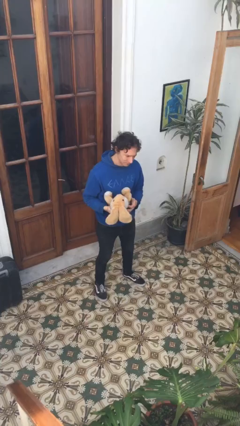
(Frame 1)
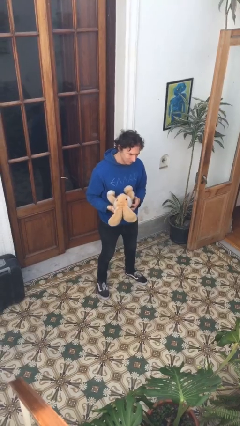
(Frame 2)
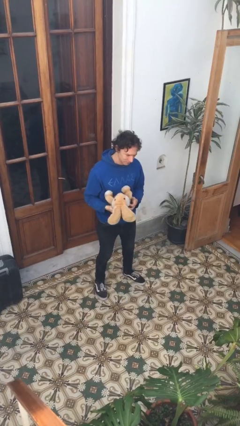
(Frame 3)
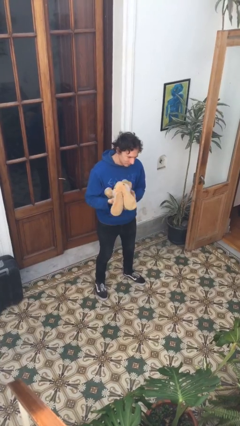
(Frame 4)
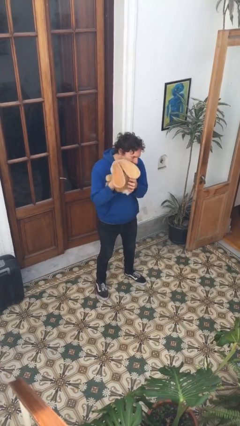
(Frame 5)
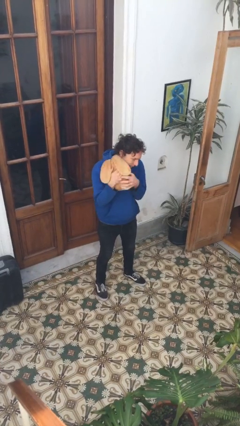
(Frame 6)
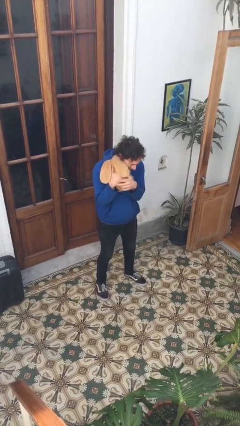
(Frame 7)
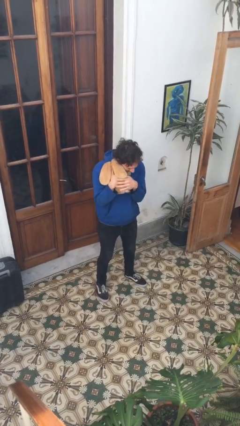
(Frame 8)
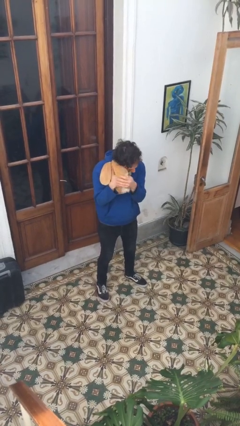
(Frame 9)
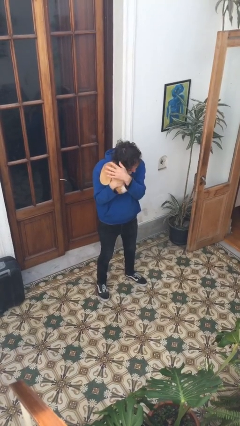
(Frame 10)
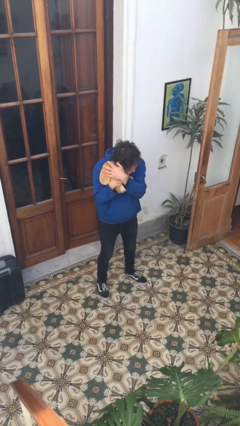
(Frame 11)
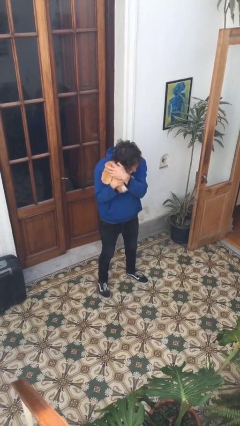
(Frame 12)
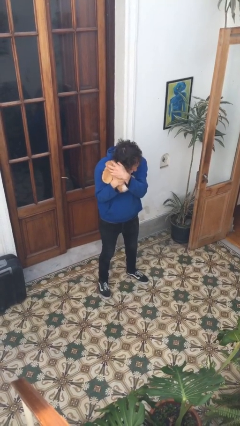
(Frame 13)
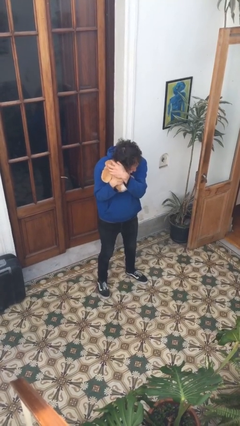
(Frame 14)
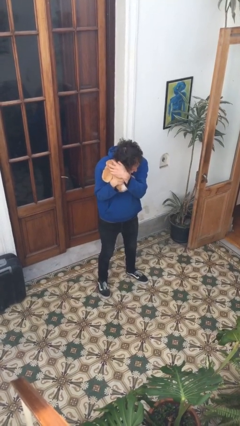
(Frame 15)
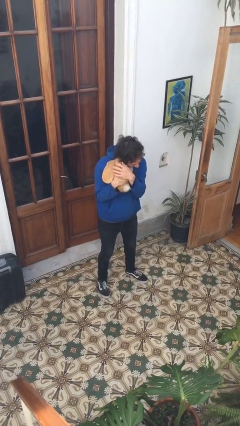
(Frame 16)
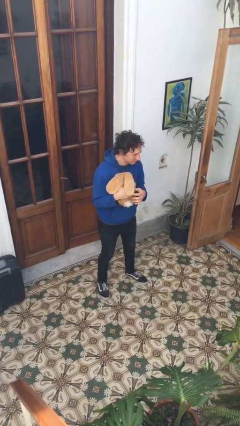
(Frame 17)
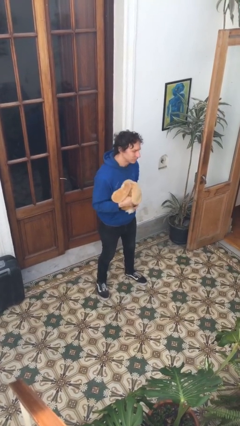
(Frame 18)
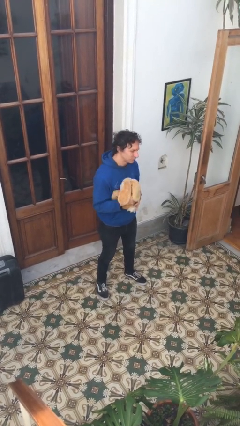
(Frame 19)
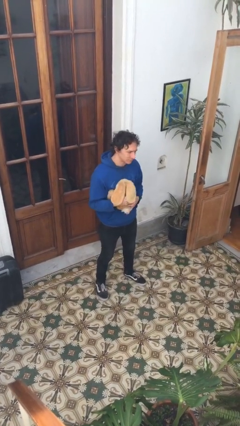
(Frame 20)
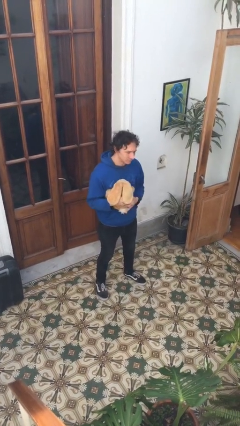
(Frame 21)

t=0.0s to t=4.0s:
person hugs stuffed animal

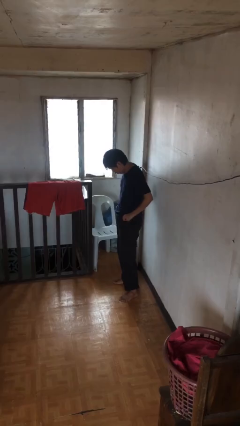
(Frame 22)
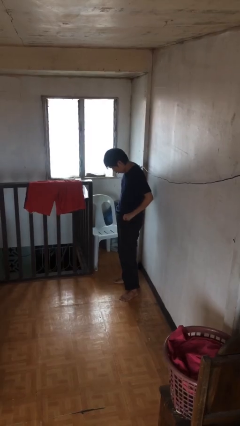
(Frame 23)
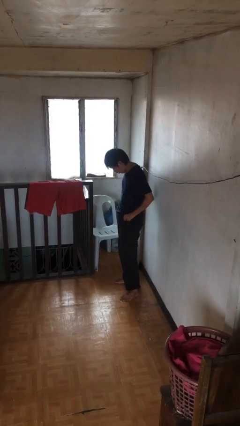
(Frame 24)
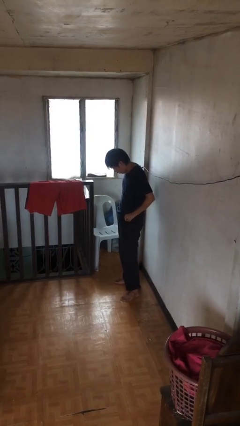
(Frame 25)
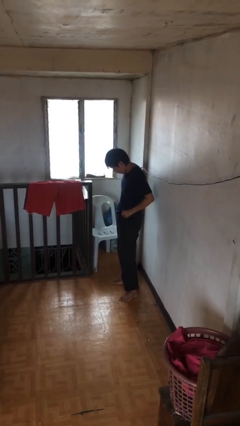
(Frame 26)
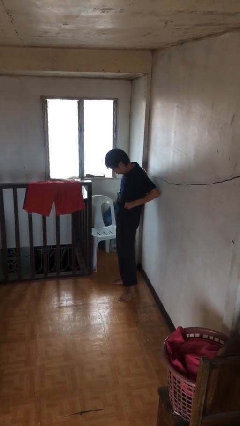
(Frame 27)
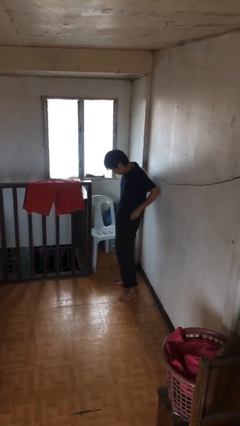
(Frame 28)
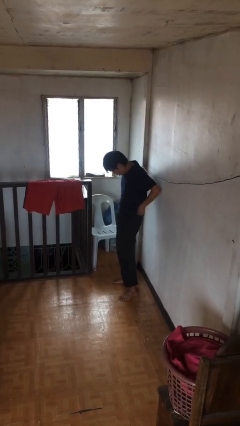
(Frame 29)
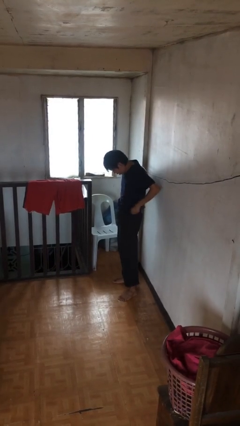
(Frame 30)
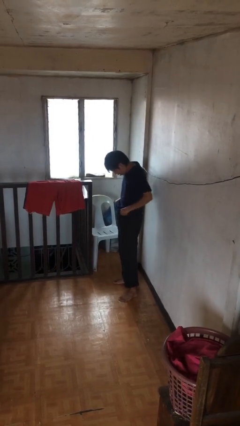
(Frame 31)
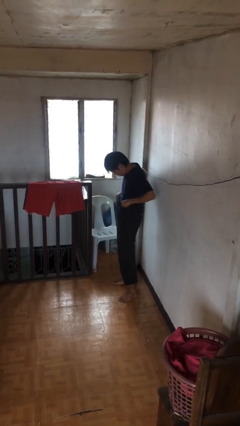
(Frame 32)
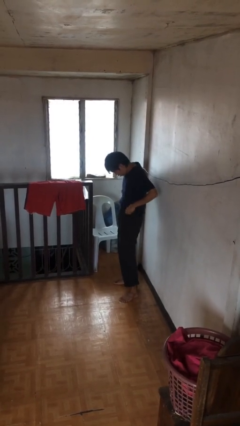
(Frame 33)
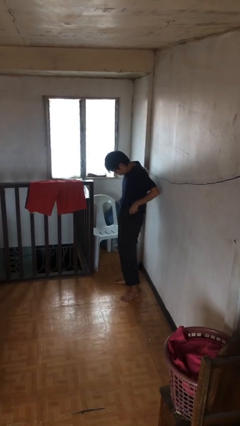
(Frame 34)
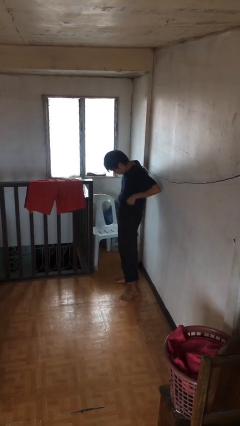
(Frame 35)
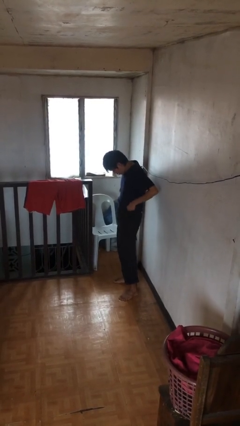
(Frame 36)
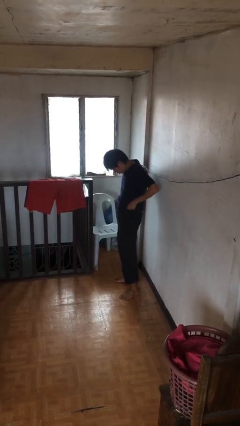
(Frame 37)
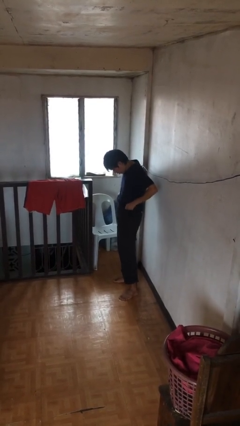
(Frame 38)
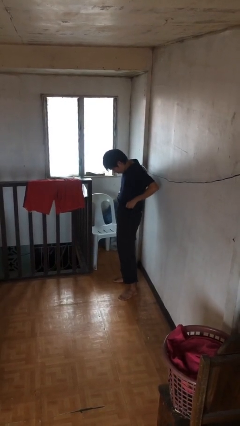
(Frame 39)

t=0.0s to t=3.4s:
person hikes up pants

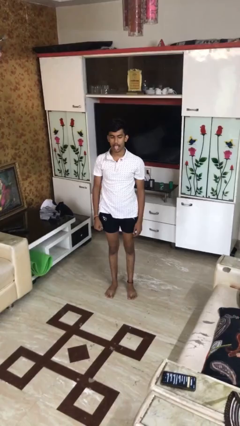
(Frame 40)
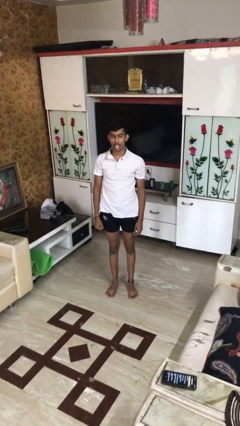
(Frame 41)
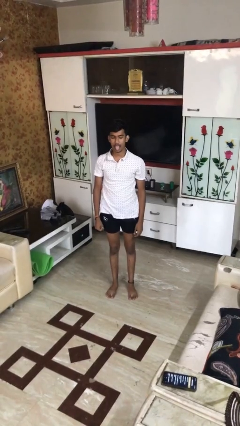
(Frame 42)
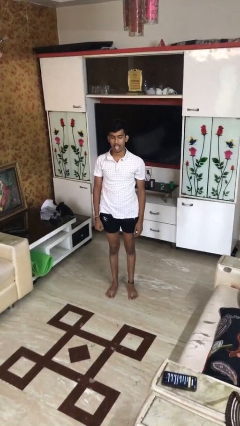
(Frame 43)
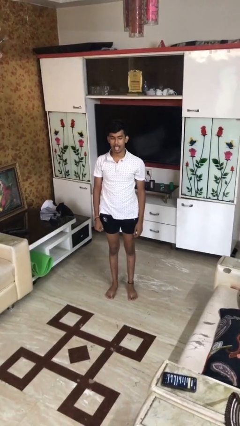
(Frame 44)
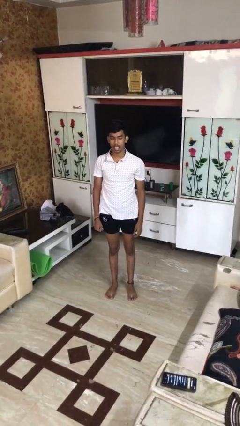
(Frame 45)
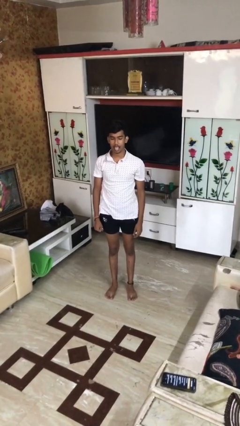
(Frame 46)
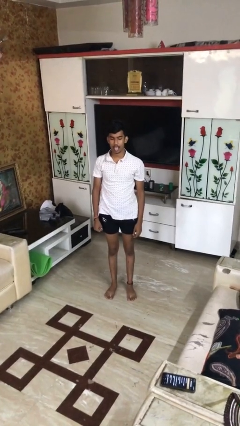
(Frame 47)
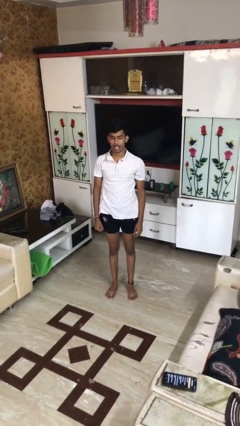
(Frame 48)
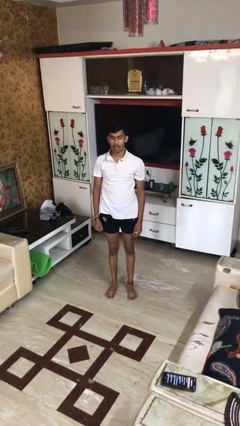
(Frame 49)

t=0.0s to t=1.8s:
person sticks out tongue

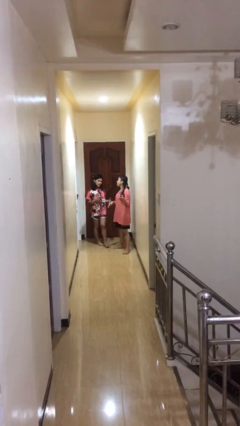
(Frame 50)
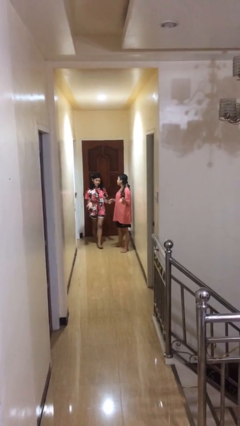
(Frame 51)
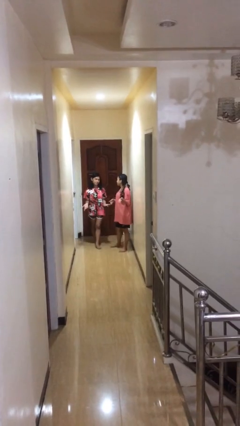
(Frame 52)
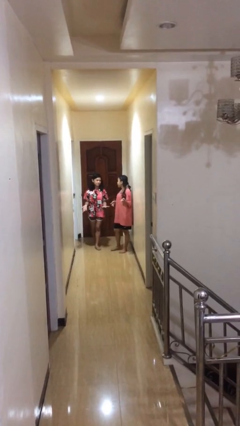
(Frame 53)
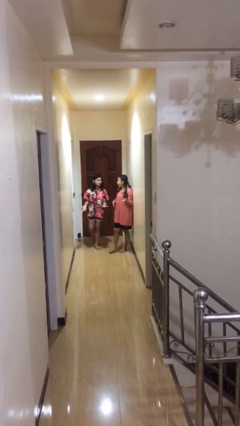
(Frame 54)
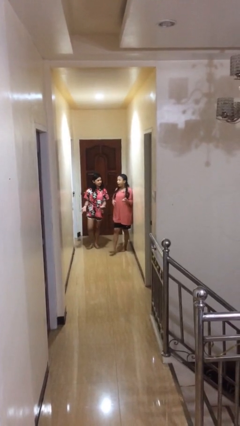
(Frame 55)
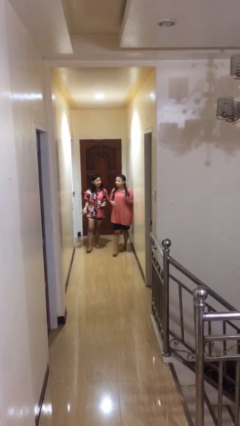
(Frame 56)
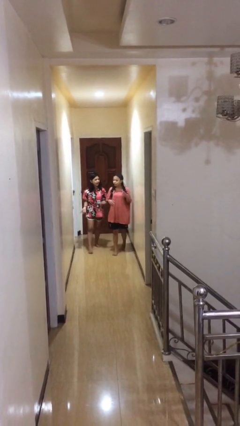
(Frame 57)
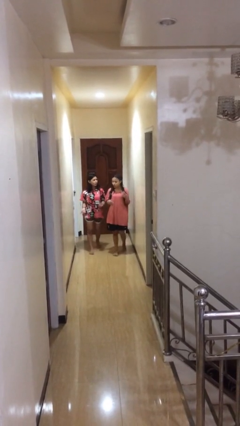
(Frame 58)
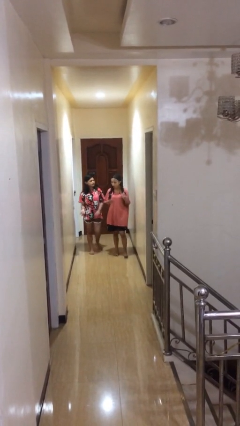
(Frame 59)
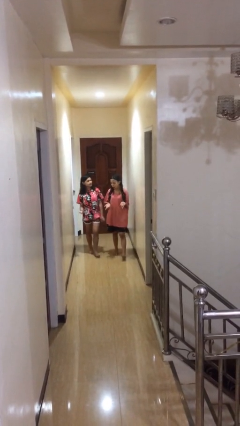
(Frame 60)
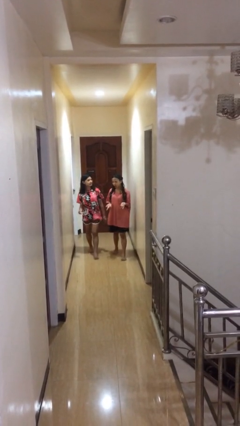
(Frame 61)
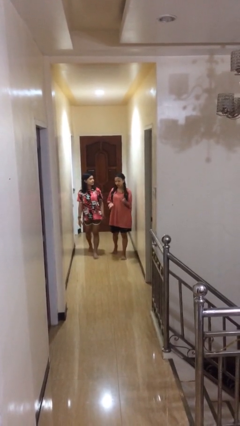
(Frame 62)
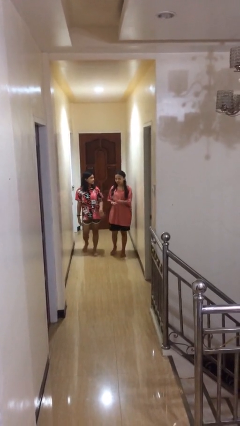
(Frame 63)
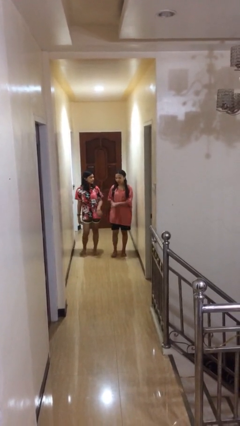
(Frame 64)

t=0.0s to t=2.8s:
person talks to person

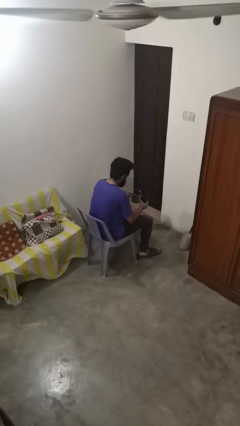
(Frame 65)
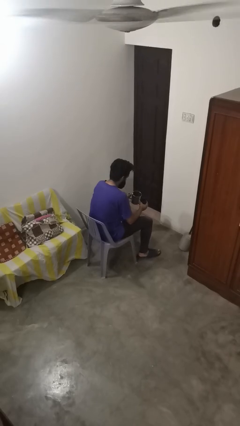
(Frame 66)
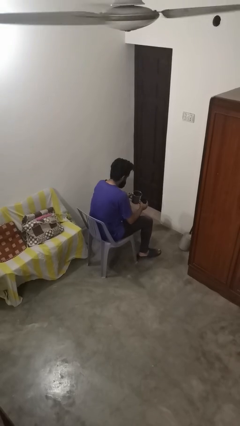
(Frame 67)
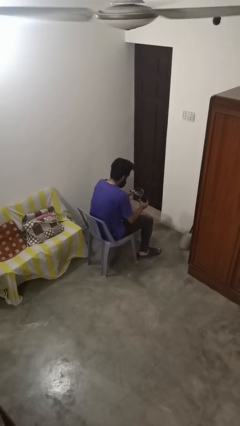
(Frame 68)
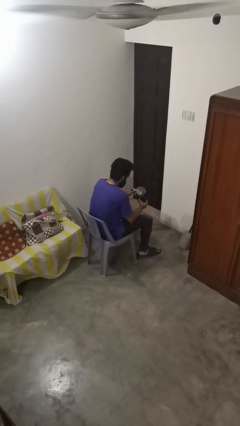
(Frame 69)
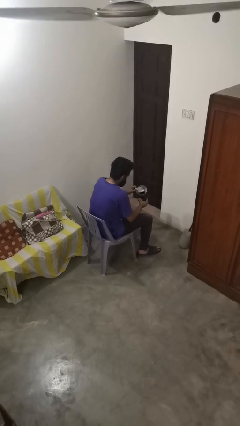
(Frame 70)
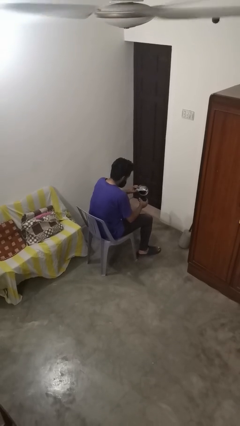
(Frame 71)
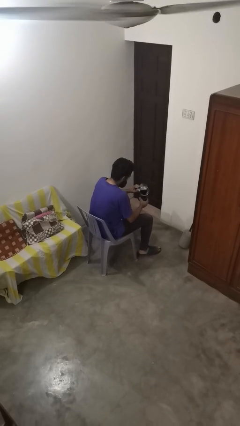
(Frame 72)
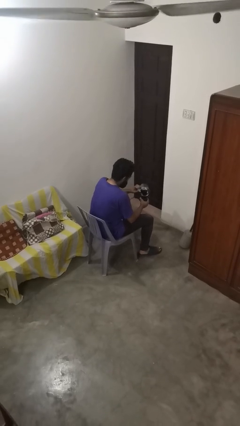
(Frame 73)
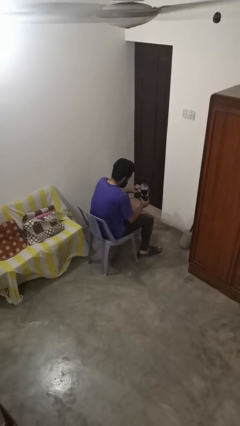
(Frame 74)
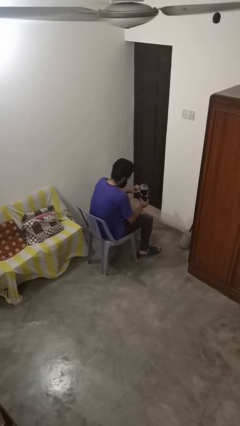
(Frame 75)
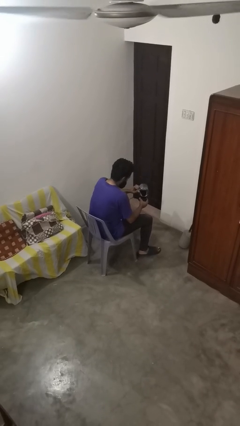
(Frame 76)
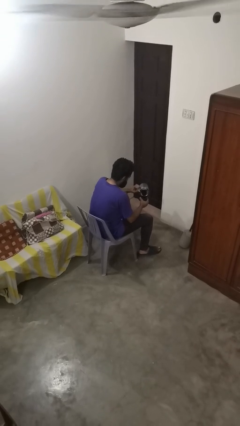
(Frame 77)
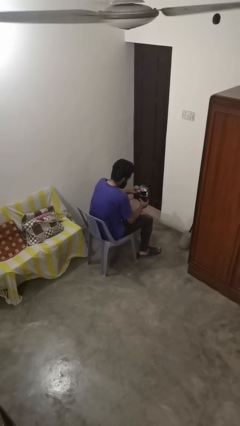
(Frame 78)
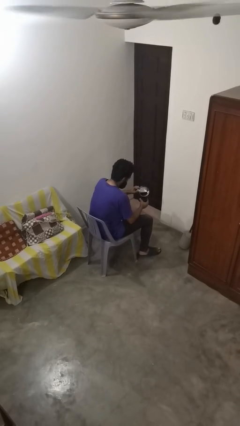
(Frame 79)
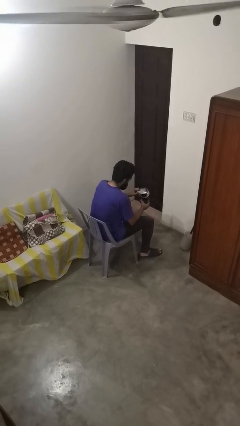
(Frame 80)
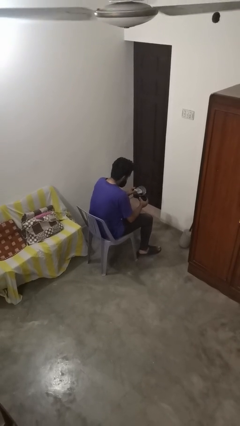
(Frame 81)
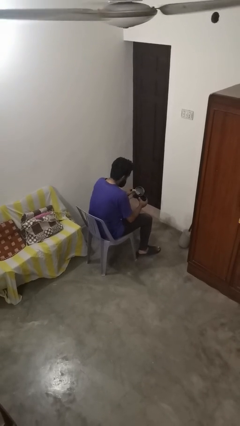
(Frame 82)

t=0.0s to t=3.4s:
person pours coffee into mug

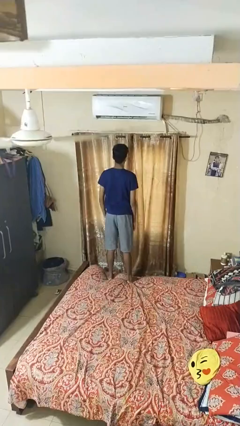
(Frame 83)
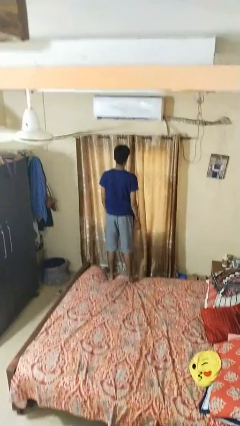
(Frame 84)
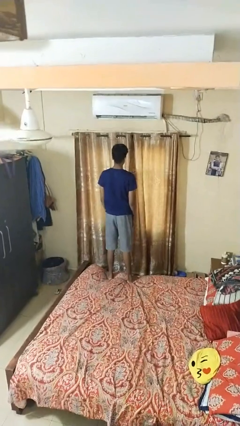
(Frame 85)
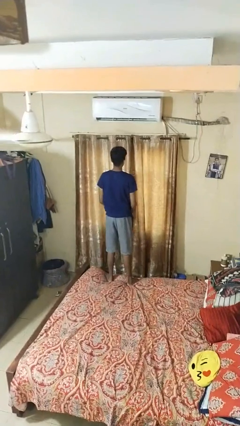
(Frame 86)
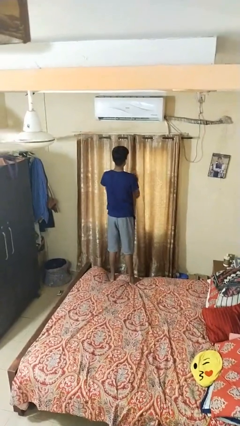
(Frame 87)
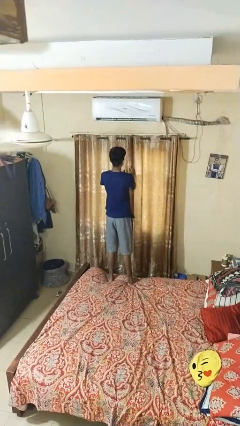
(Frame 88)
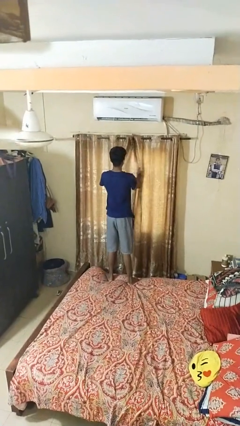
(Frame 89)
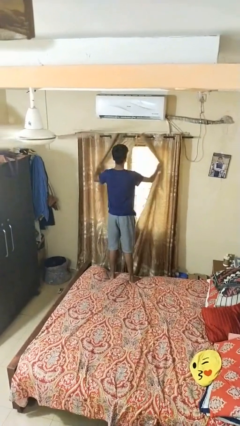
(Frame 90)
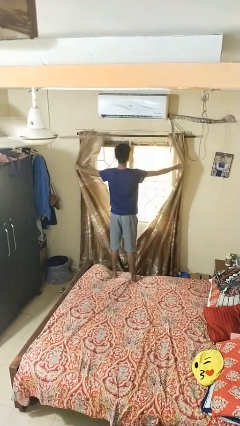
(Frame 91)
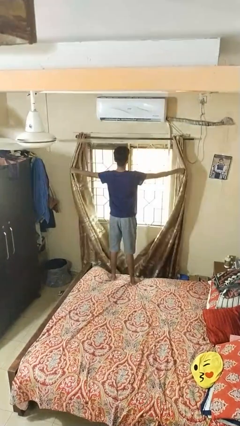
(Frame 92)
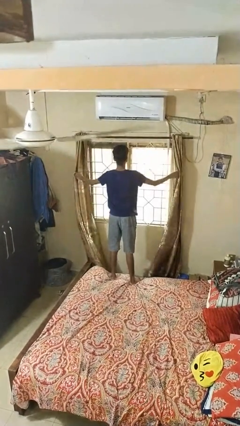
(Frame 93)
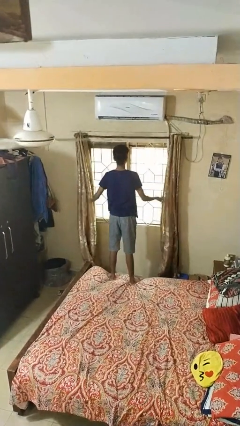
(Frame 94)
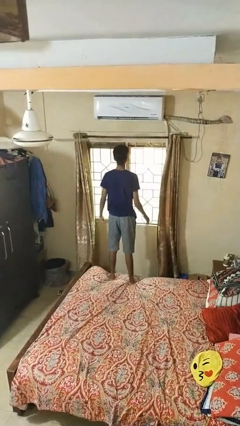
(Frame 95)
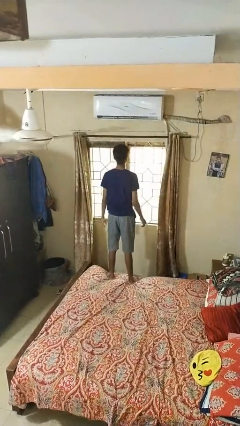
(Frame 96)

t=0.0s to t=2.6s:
person opens curtains
